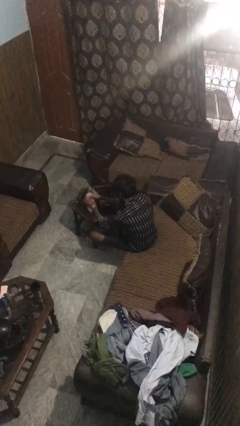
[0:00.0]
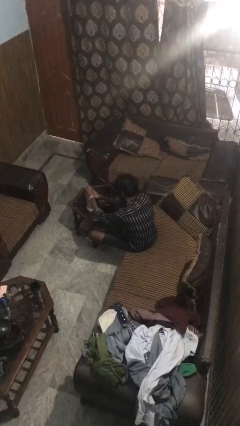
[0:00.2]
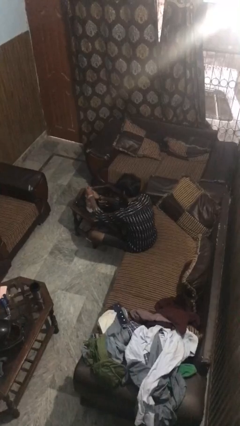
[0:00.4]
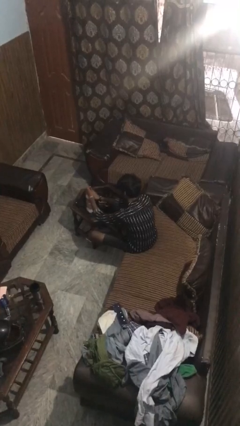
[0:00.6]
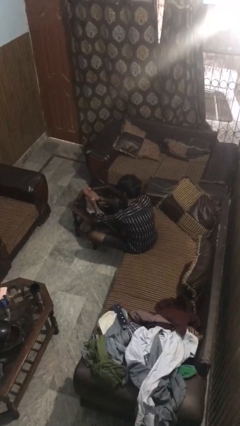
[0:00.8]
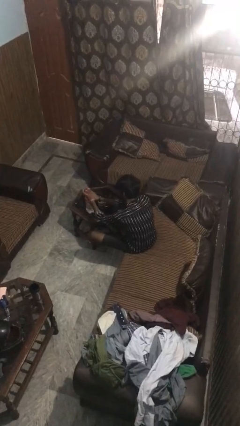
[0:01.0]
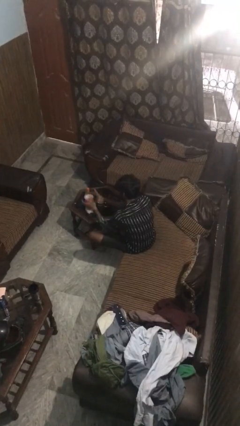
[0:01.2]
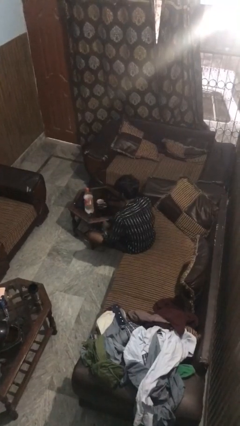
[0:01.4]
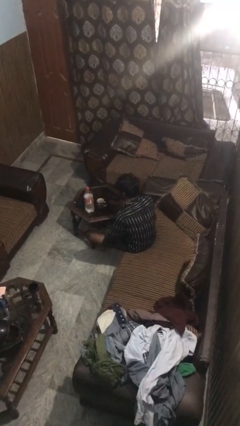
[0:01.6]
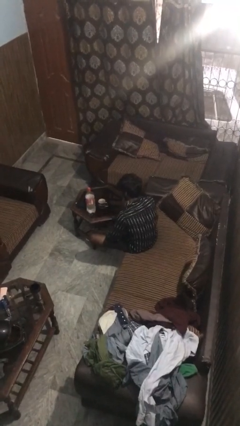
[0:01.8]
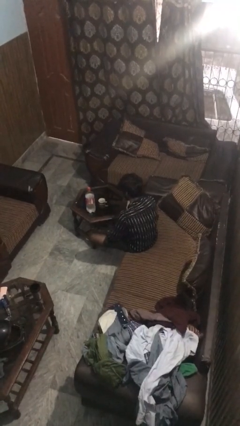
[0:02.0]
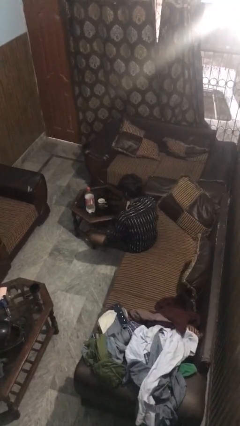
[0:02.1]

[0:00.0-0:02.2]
person screws lid to bottle

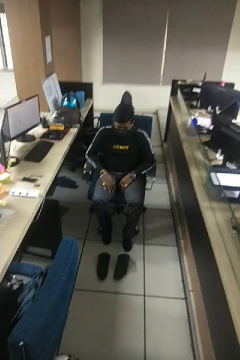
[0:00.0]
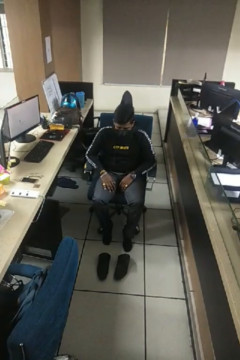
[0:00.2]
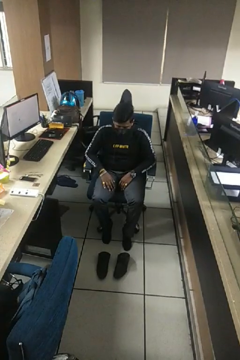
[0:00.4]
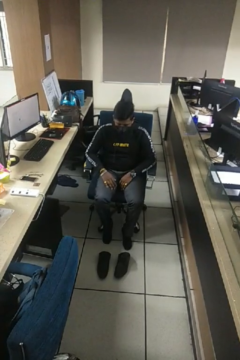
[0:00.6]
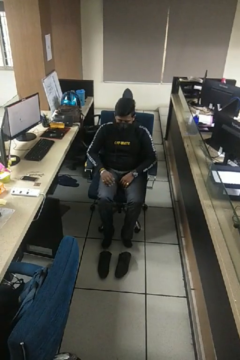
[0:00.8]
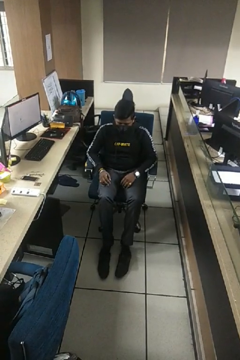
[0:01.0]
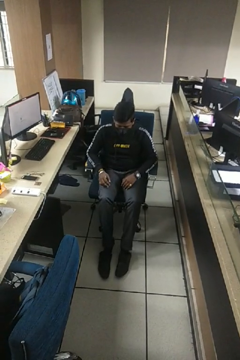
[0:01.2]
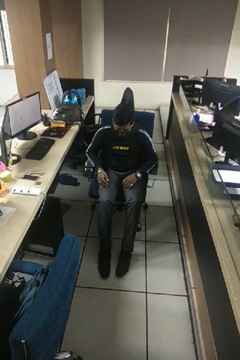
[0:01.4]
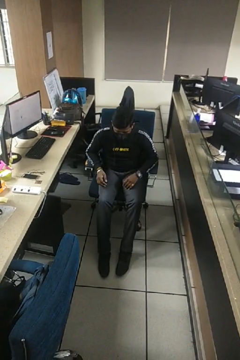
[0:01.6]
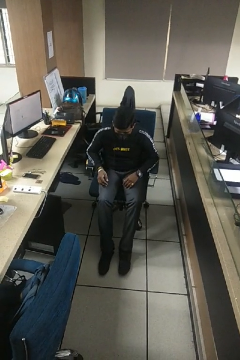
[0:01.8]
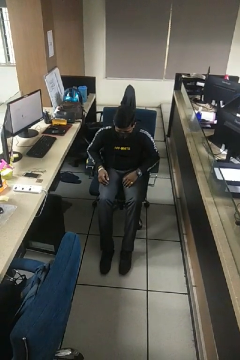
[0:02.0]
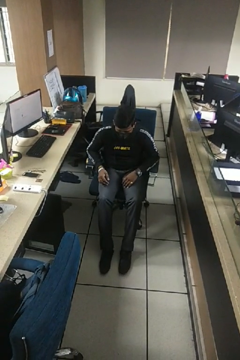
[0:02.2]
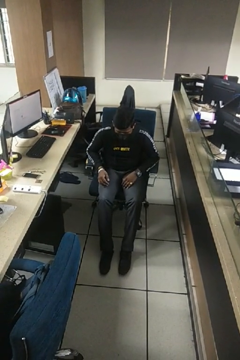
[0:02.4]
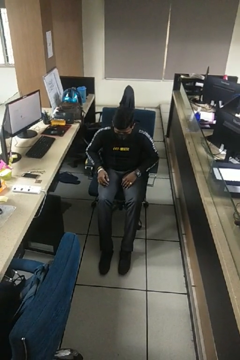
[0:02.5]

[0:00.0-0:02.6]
person puts on shoes

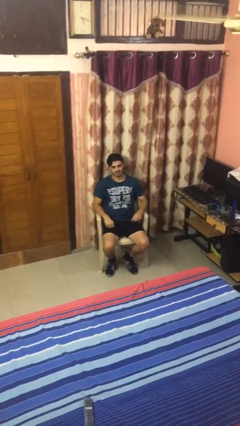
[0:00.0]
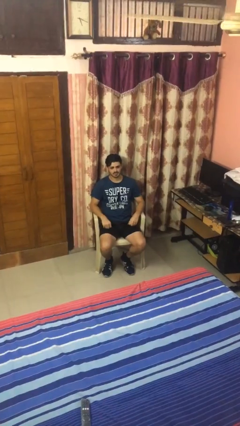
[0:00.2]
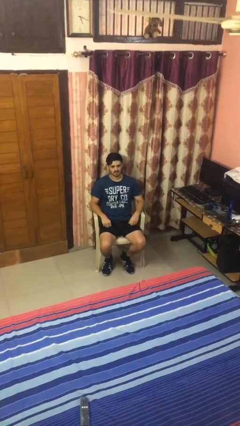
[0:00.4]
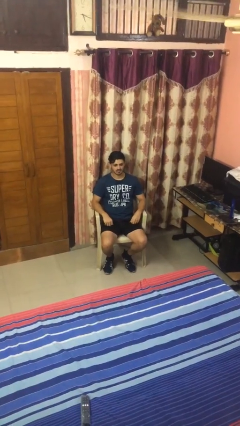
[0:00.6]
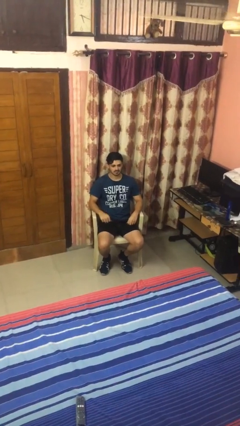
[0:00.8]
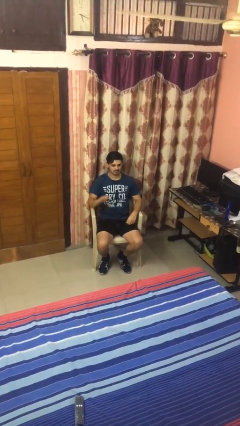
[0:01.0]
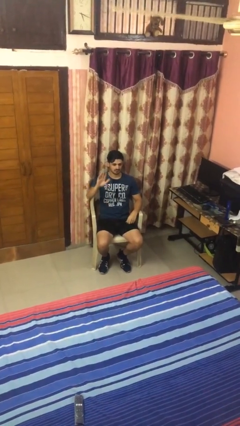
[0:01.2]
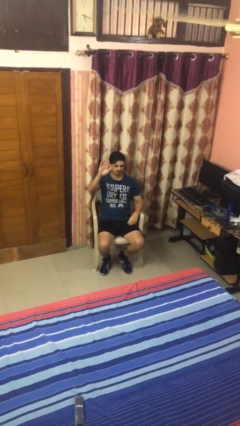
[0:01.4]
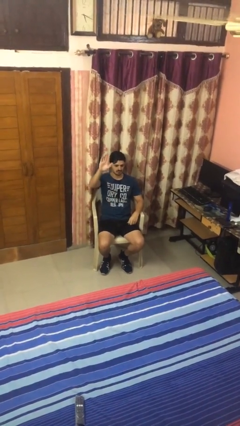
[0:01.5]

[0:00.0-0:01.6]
person gestures raise hand

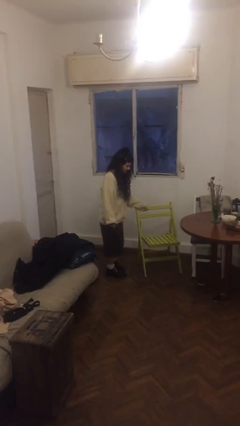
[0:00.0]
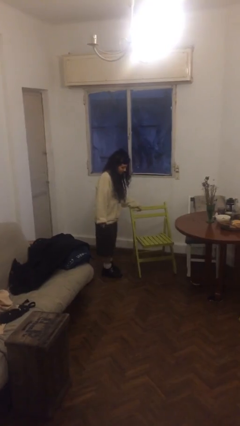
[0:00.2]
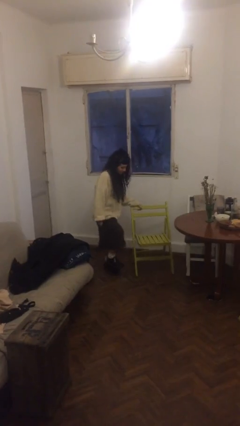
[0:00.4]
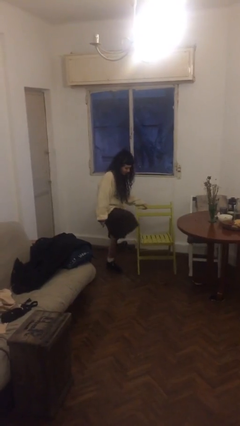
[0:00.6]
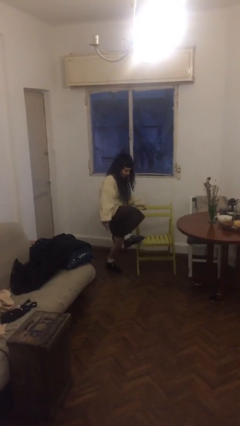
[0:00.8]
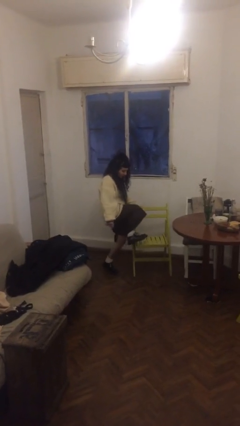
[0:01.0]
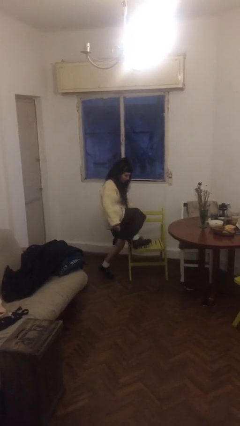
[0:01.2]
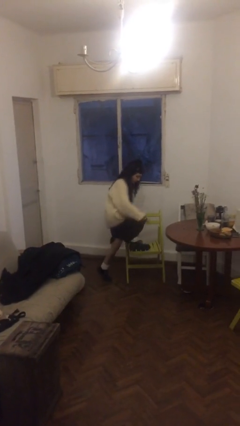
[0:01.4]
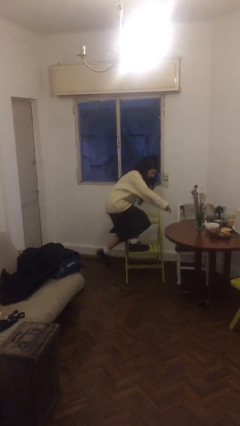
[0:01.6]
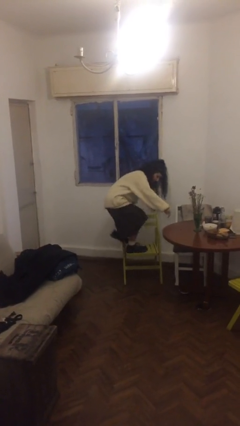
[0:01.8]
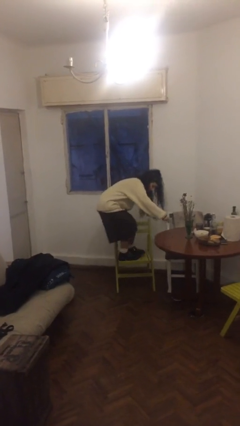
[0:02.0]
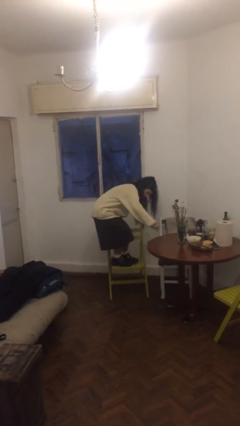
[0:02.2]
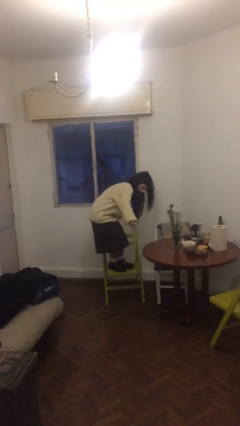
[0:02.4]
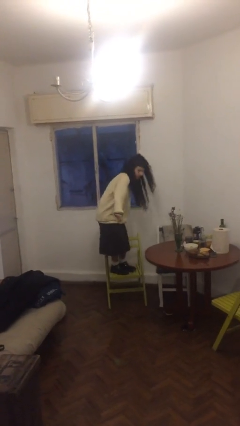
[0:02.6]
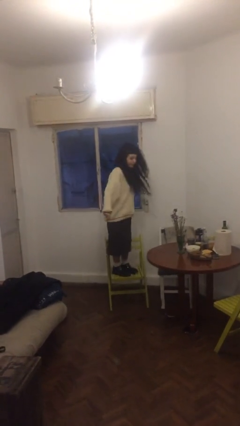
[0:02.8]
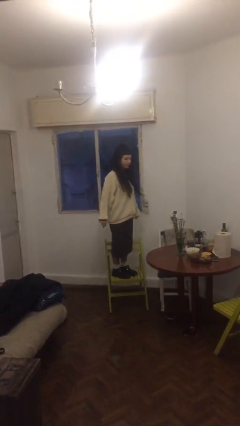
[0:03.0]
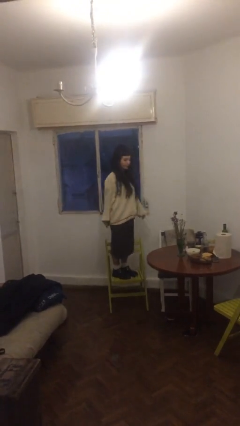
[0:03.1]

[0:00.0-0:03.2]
person climbs on chair

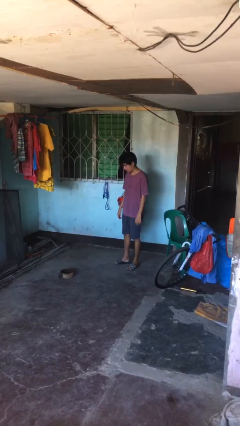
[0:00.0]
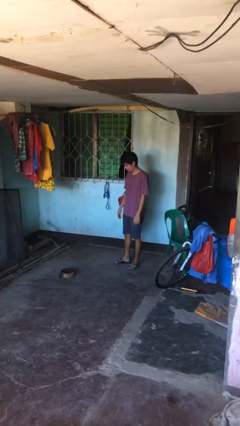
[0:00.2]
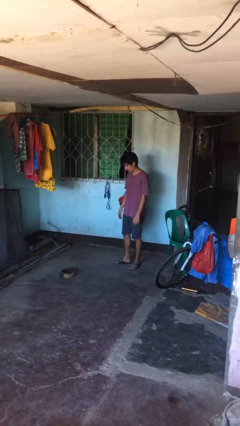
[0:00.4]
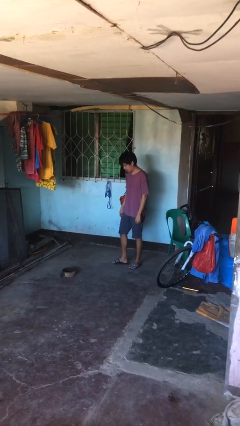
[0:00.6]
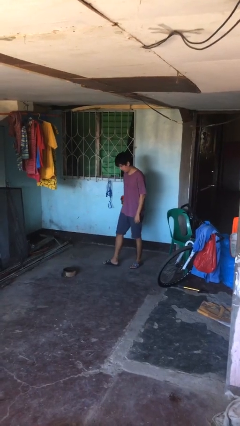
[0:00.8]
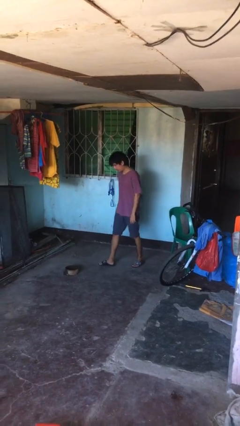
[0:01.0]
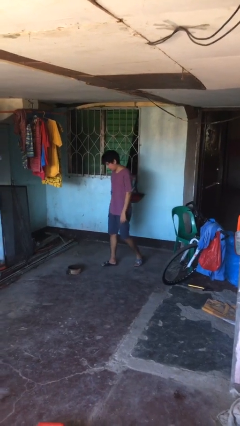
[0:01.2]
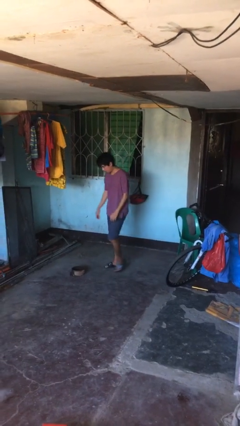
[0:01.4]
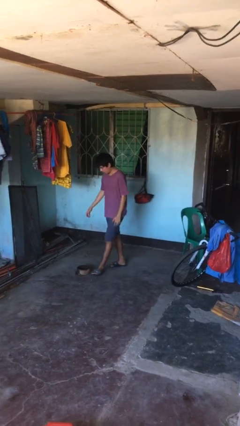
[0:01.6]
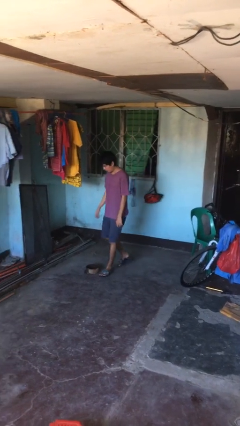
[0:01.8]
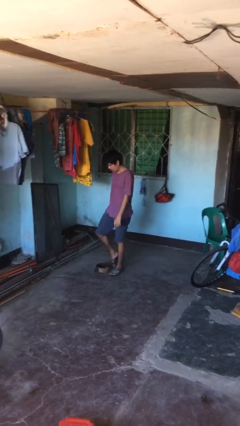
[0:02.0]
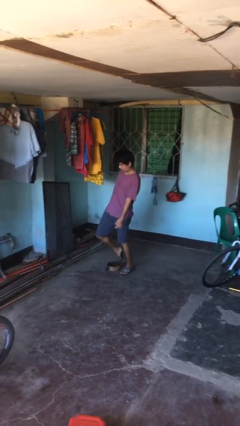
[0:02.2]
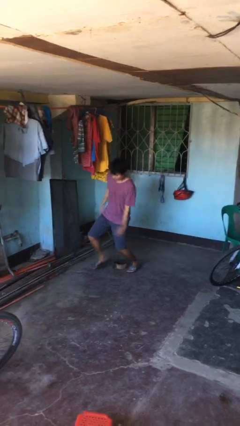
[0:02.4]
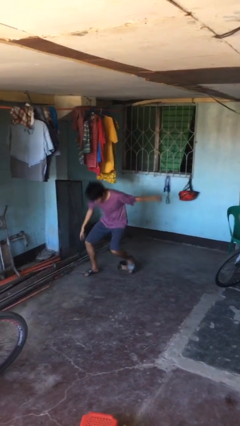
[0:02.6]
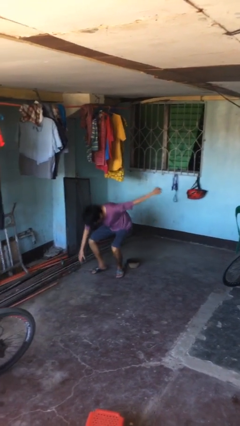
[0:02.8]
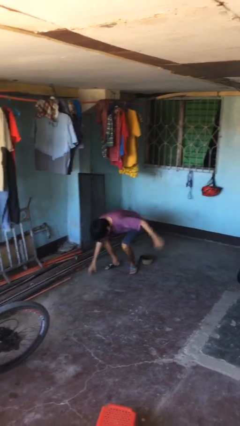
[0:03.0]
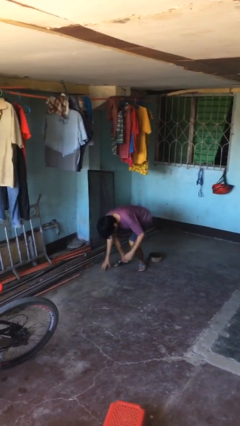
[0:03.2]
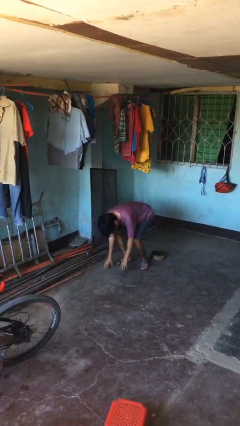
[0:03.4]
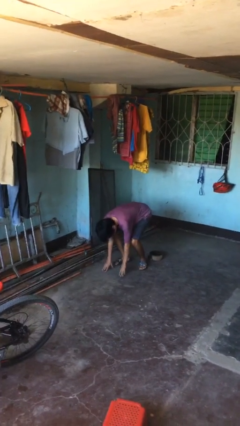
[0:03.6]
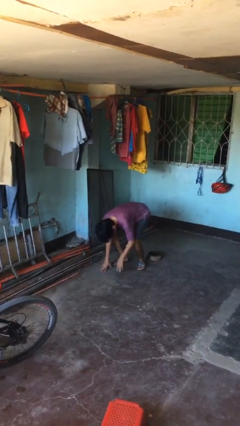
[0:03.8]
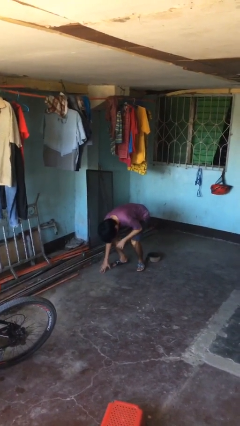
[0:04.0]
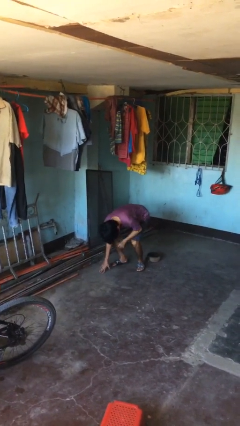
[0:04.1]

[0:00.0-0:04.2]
person trips on object on floor

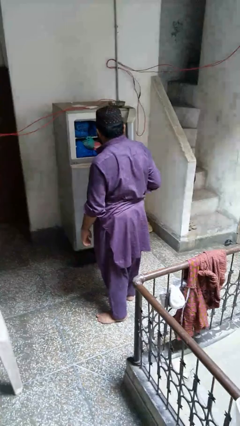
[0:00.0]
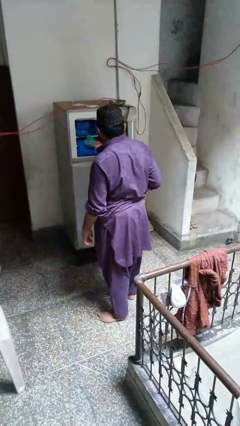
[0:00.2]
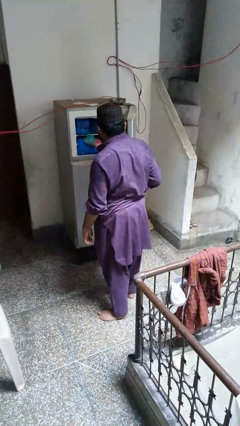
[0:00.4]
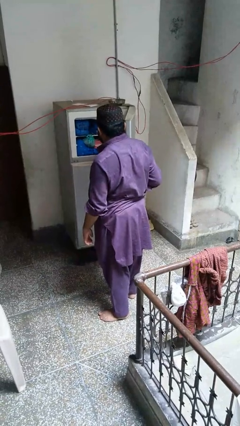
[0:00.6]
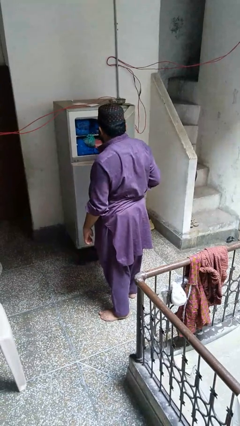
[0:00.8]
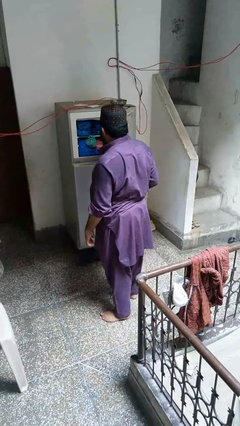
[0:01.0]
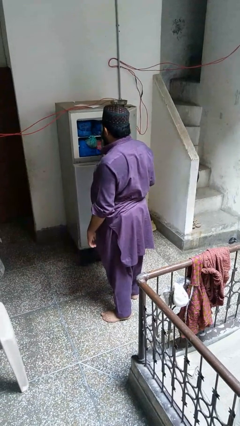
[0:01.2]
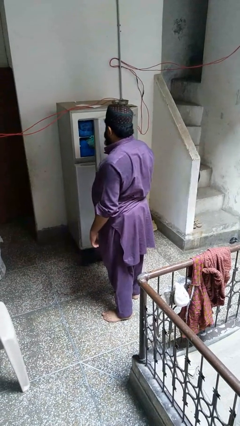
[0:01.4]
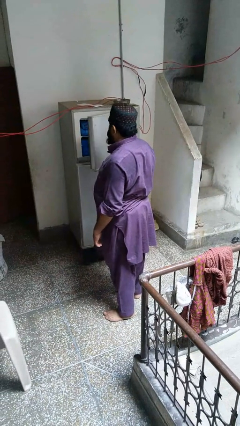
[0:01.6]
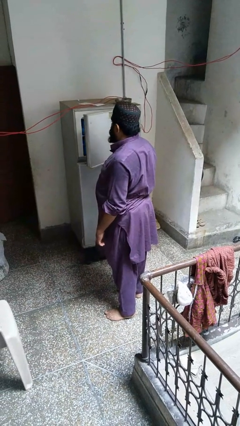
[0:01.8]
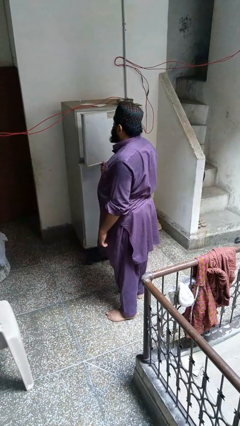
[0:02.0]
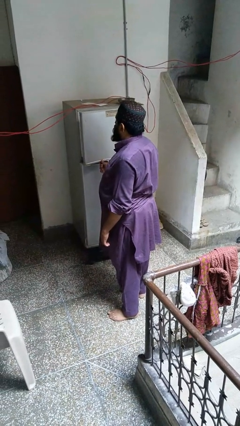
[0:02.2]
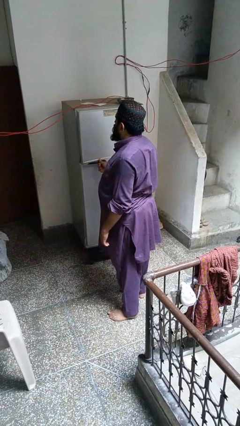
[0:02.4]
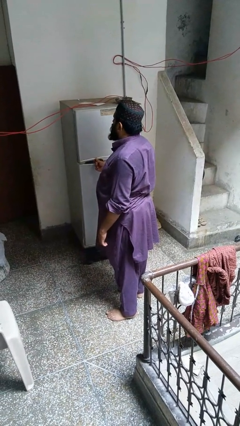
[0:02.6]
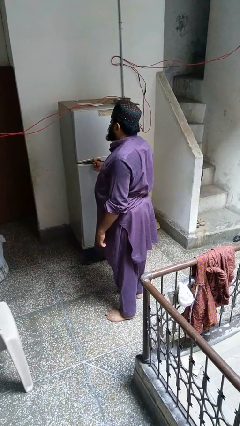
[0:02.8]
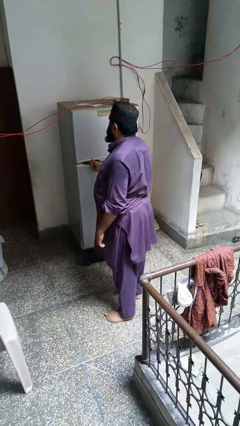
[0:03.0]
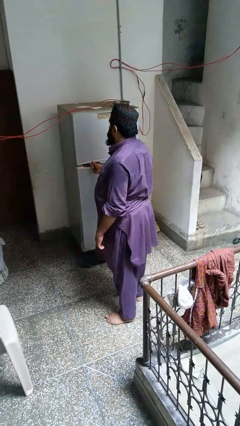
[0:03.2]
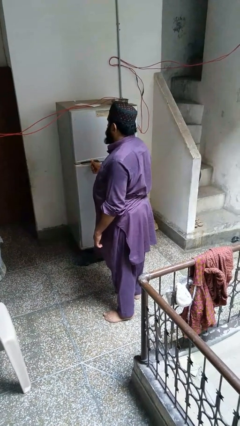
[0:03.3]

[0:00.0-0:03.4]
person closes refrigerator

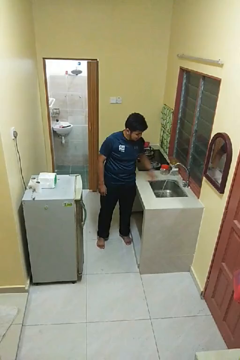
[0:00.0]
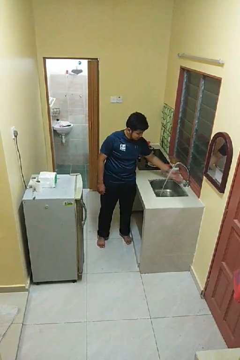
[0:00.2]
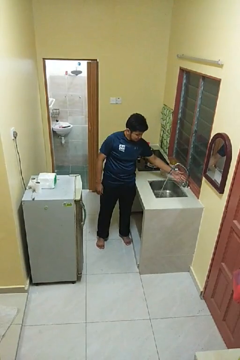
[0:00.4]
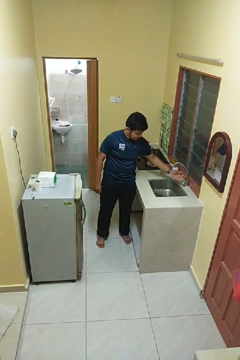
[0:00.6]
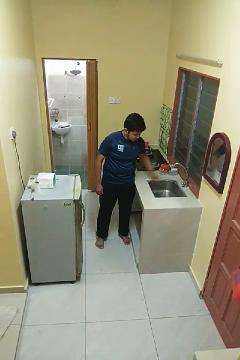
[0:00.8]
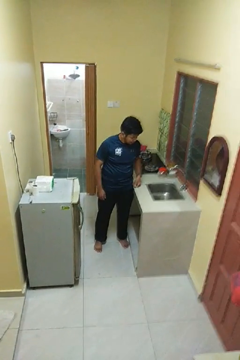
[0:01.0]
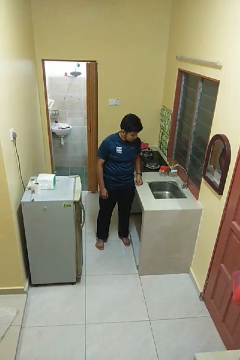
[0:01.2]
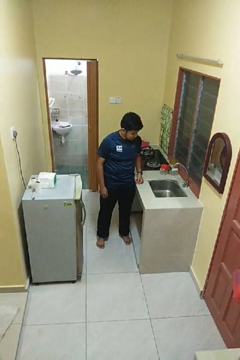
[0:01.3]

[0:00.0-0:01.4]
person turns off faucet
